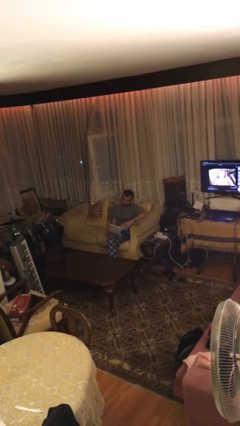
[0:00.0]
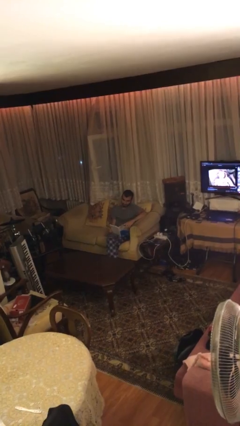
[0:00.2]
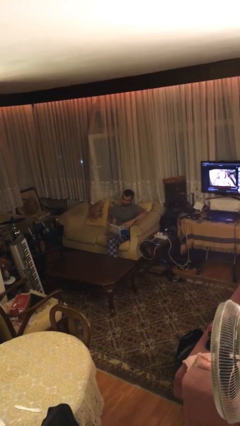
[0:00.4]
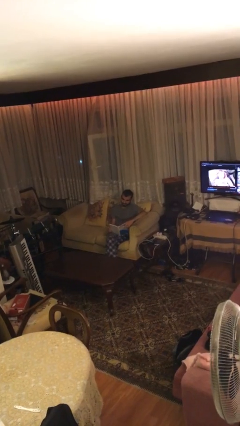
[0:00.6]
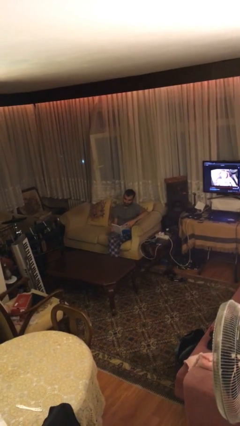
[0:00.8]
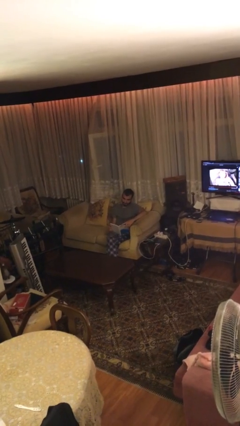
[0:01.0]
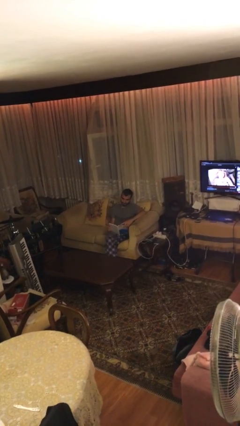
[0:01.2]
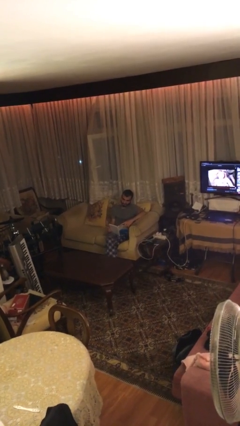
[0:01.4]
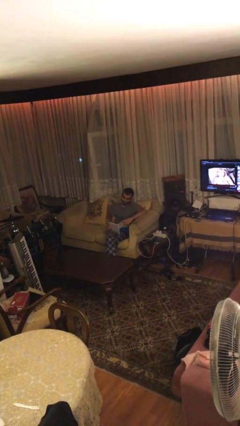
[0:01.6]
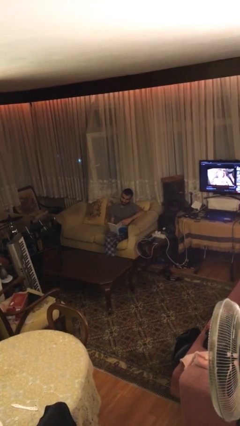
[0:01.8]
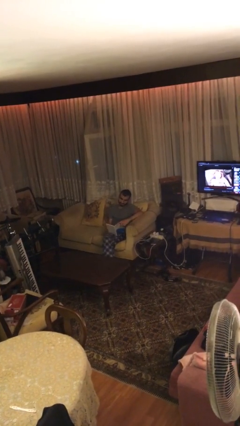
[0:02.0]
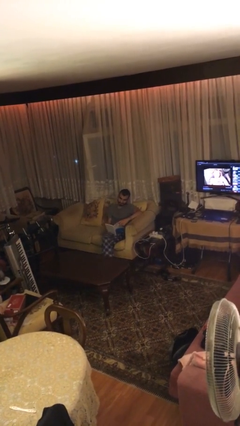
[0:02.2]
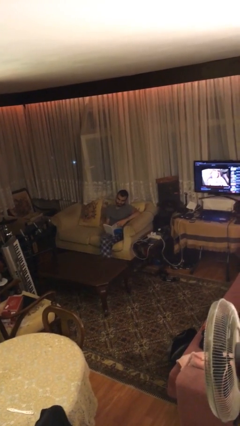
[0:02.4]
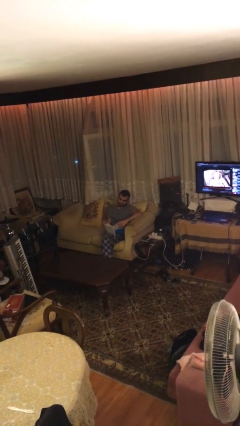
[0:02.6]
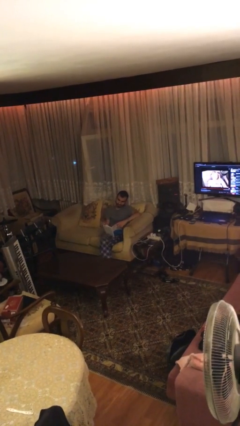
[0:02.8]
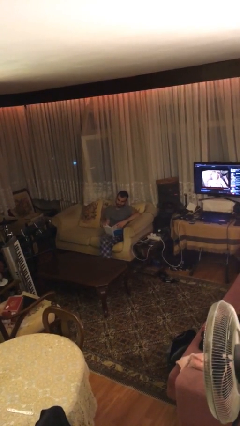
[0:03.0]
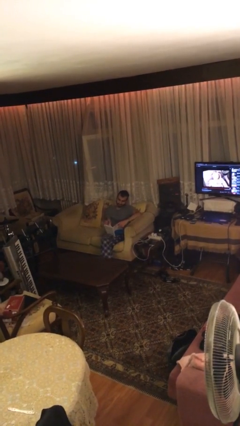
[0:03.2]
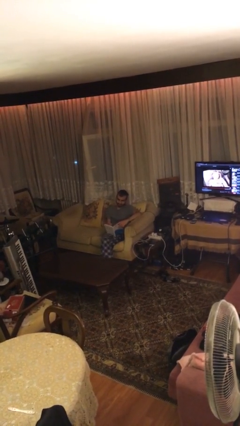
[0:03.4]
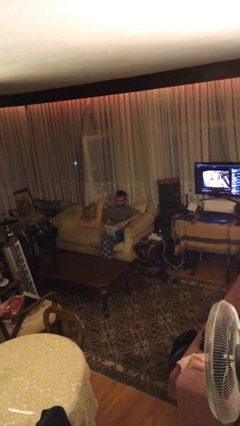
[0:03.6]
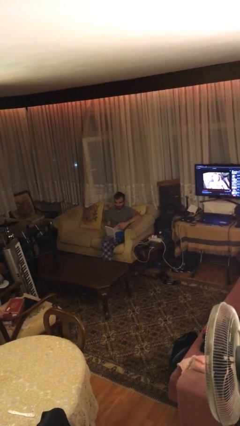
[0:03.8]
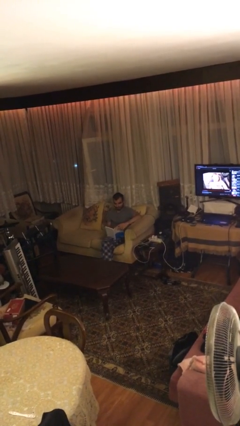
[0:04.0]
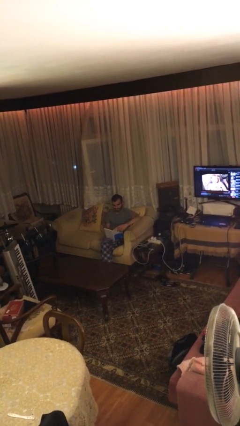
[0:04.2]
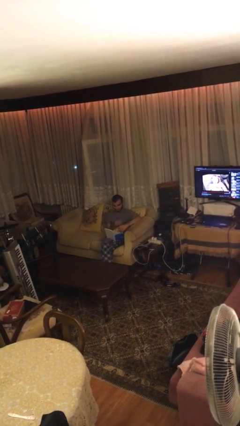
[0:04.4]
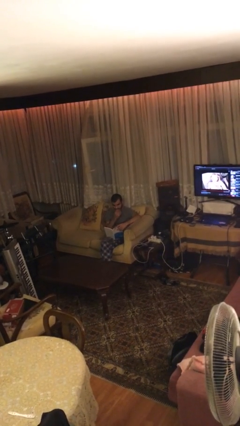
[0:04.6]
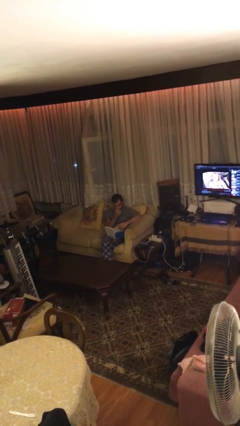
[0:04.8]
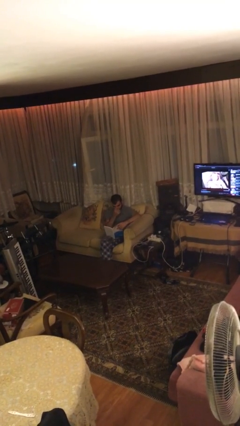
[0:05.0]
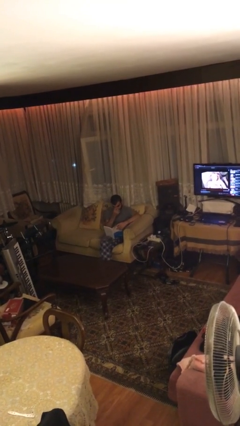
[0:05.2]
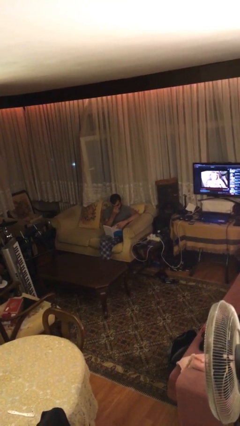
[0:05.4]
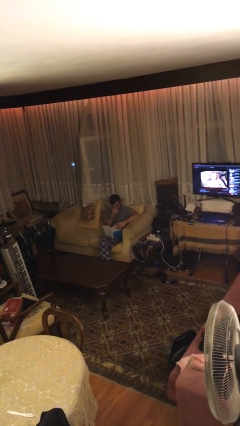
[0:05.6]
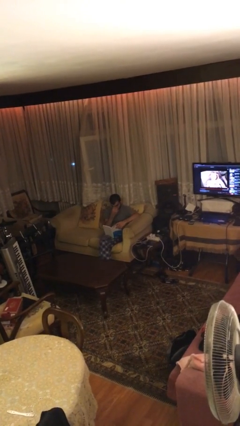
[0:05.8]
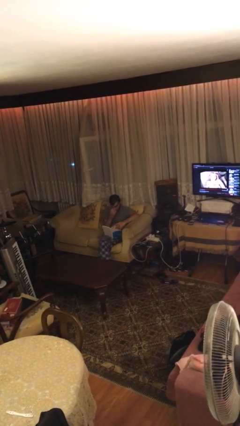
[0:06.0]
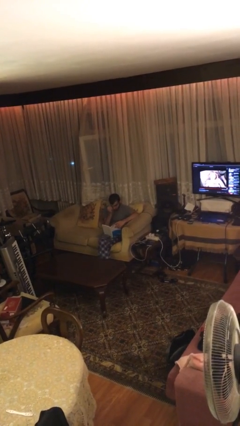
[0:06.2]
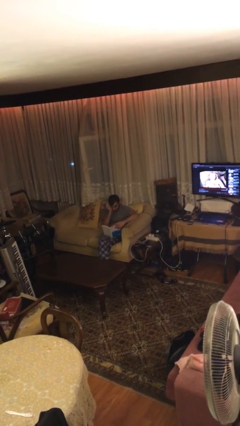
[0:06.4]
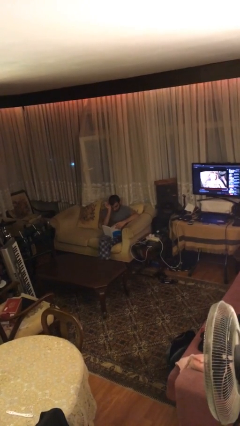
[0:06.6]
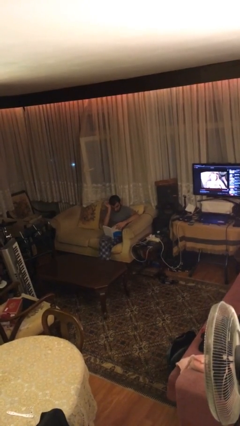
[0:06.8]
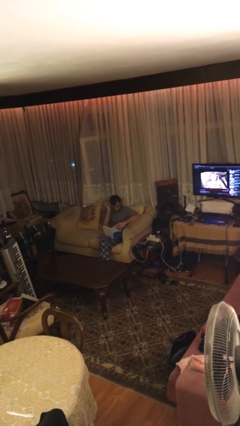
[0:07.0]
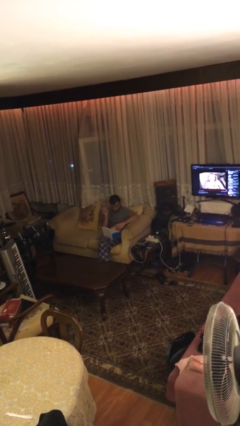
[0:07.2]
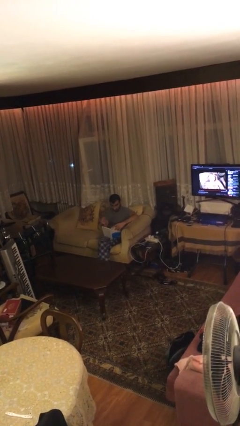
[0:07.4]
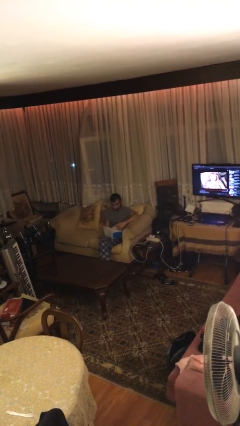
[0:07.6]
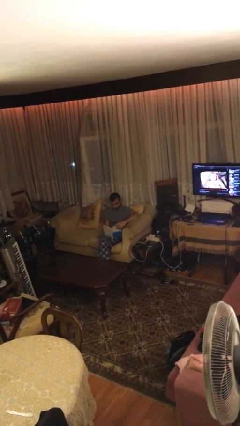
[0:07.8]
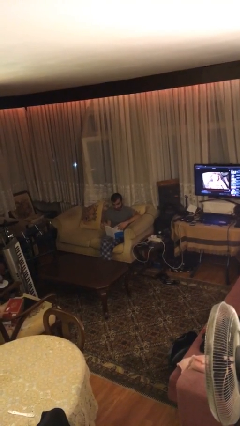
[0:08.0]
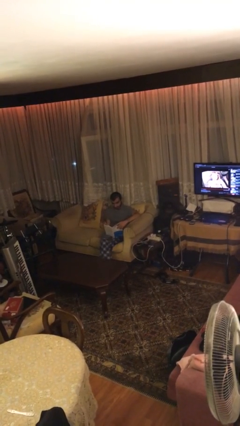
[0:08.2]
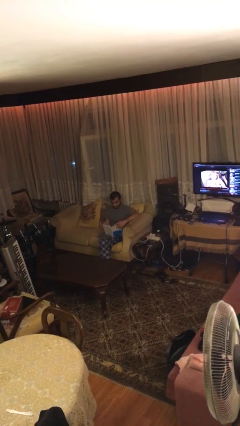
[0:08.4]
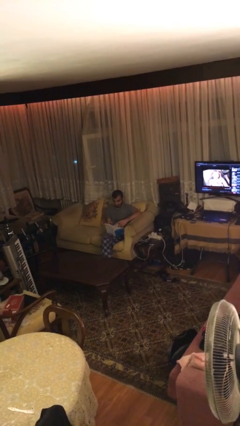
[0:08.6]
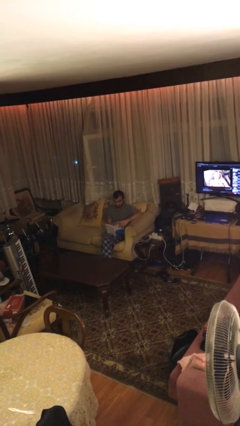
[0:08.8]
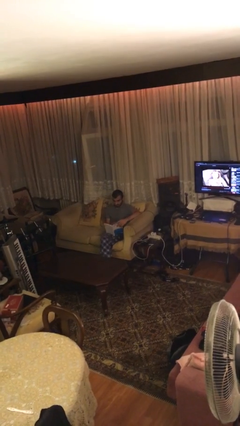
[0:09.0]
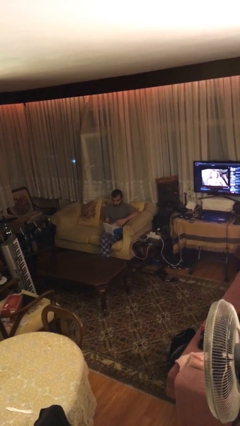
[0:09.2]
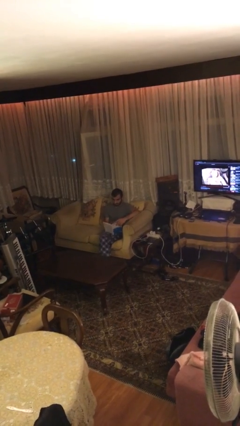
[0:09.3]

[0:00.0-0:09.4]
person reads document

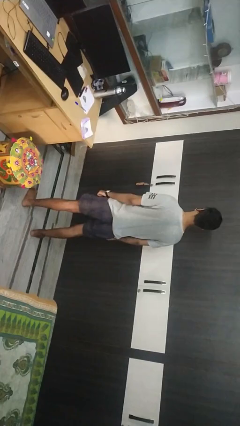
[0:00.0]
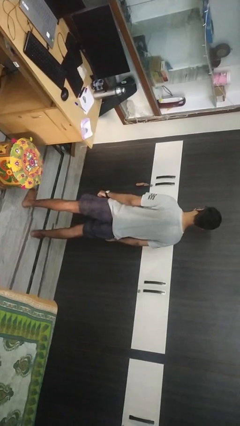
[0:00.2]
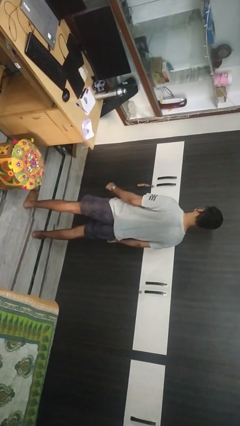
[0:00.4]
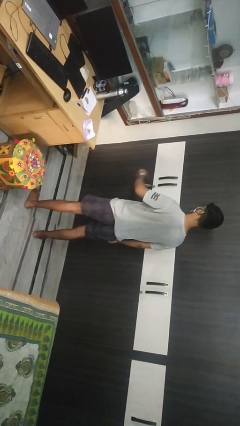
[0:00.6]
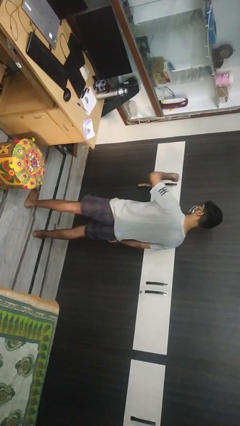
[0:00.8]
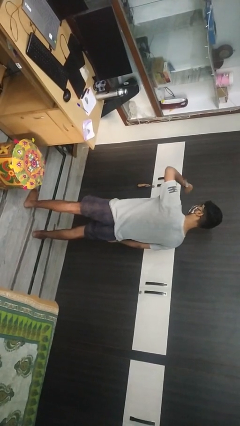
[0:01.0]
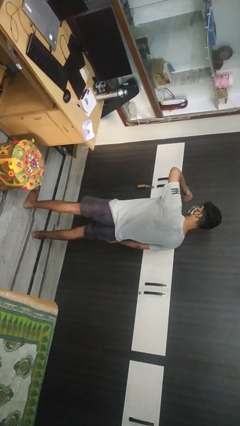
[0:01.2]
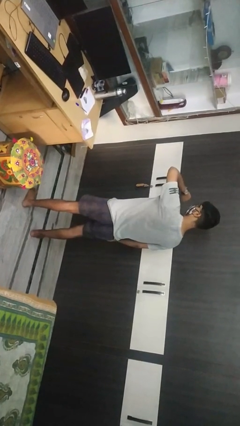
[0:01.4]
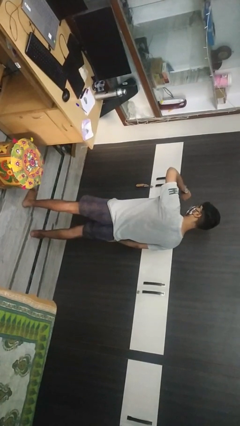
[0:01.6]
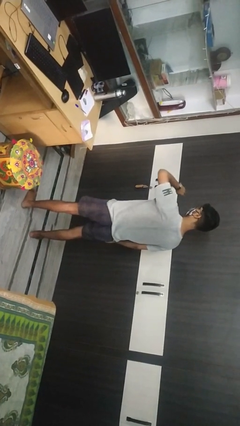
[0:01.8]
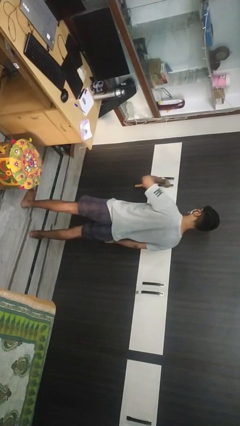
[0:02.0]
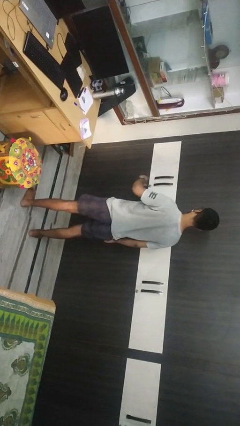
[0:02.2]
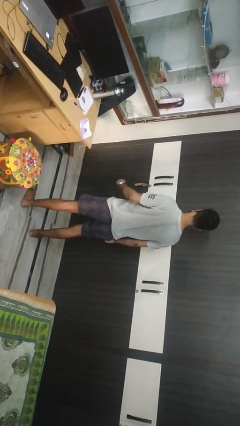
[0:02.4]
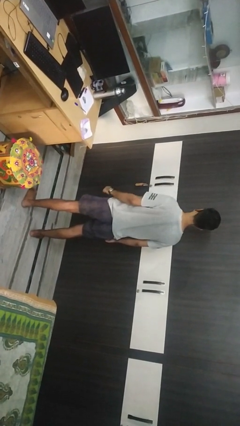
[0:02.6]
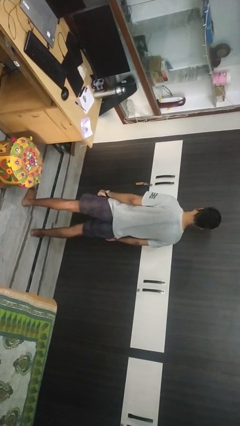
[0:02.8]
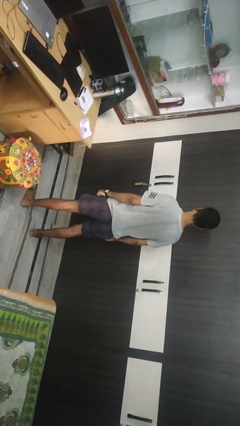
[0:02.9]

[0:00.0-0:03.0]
person looks at wristwatch

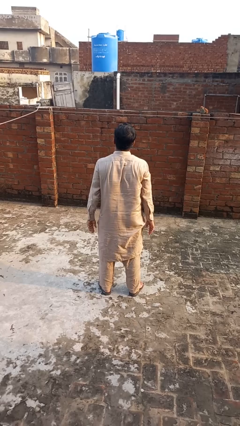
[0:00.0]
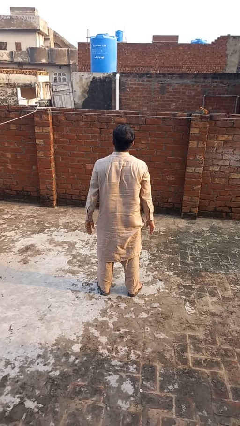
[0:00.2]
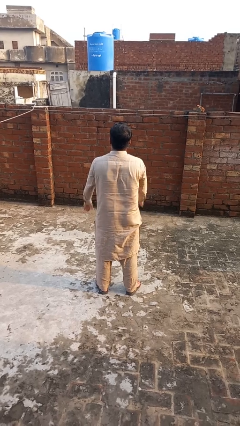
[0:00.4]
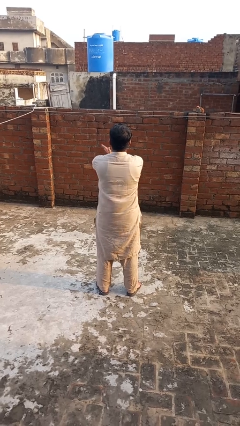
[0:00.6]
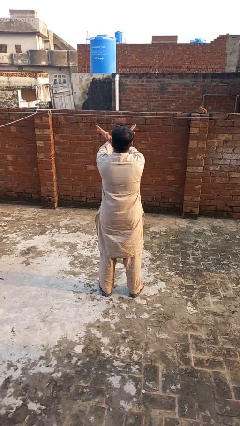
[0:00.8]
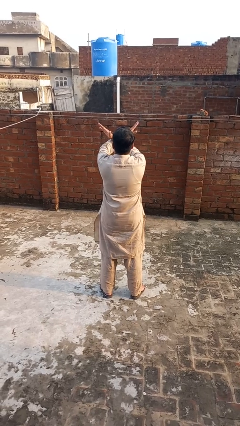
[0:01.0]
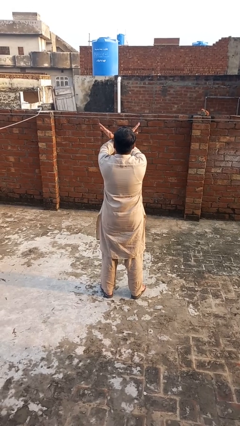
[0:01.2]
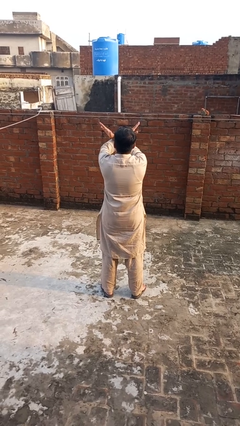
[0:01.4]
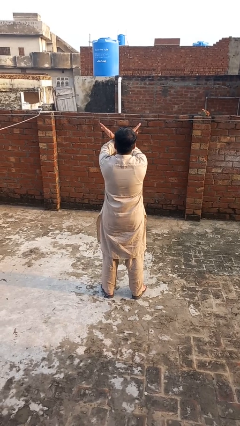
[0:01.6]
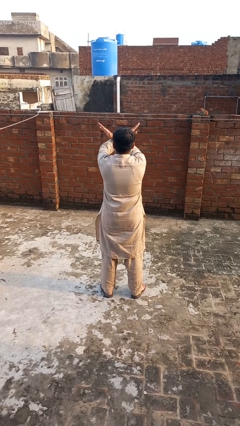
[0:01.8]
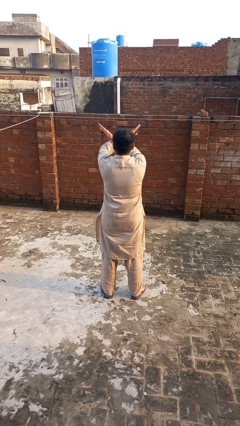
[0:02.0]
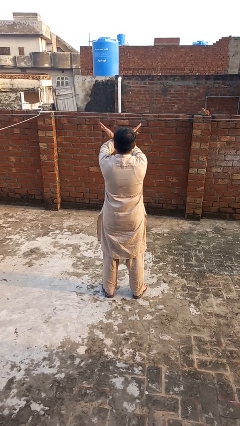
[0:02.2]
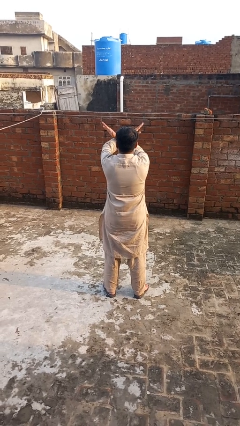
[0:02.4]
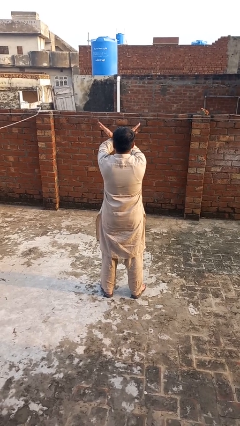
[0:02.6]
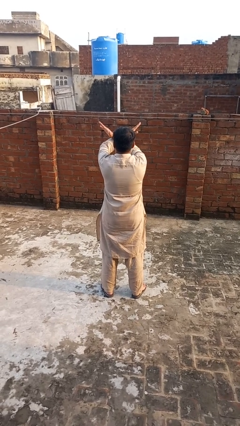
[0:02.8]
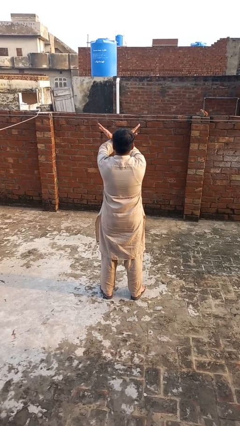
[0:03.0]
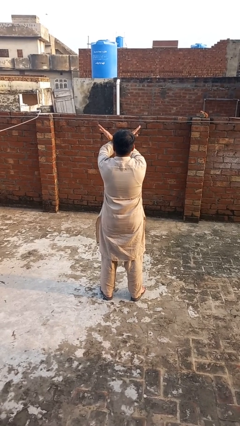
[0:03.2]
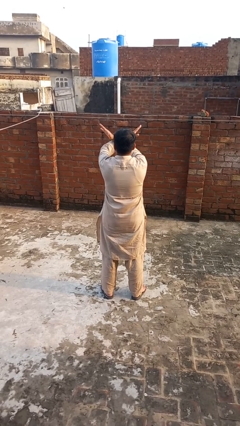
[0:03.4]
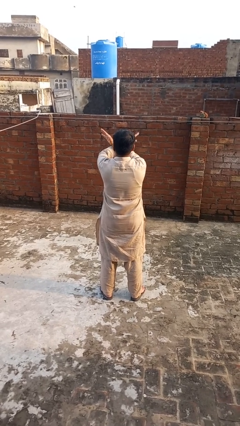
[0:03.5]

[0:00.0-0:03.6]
person gestures arms x

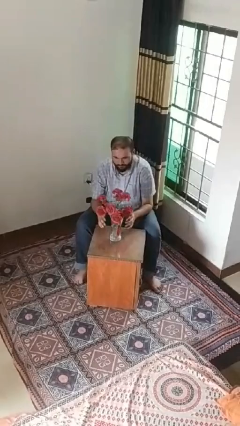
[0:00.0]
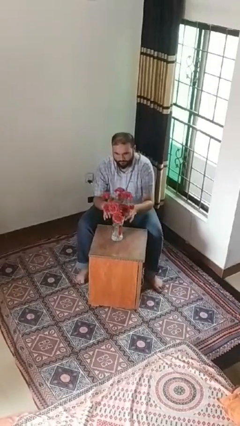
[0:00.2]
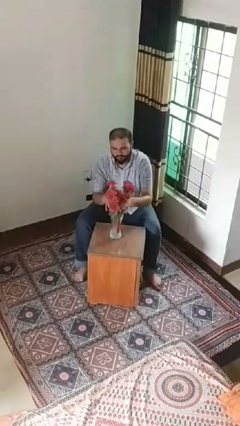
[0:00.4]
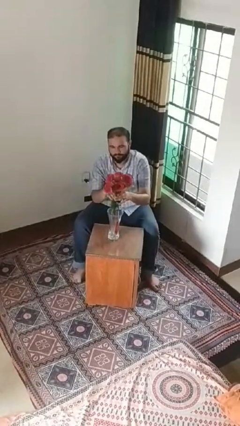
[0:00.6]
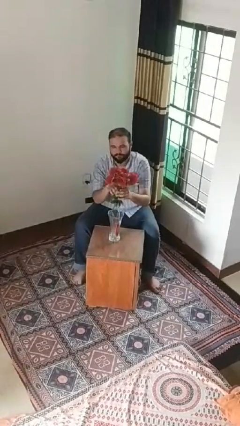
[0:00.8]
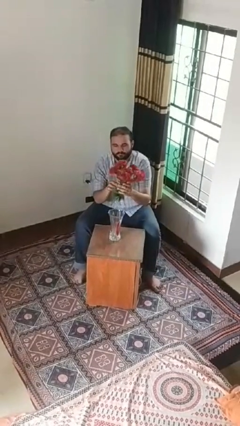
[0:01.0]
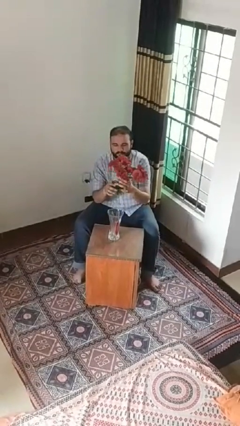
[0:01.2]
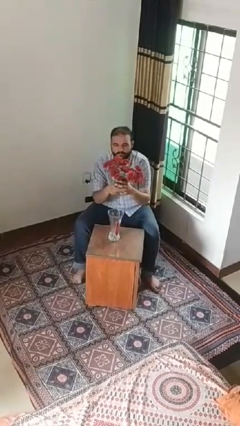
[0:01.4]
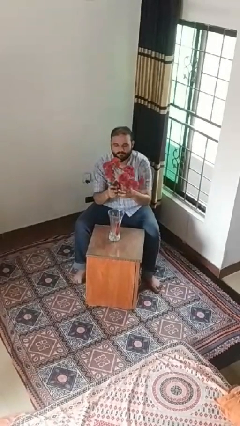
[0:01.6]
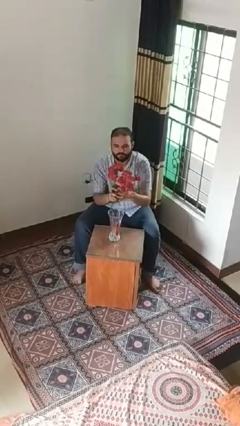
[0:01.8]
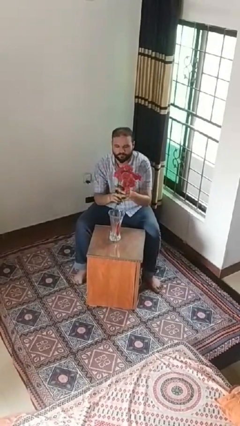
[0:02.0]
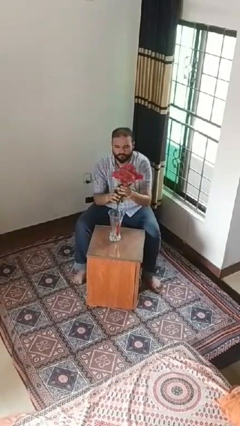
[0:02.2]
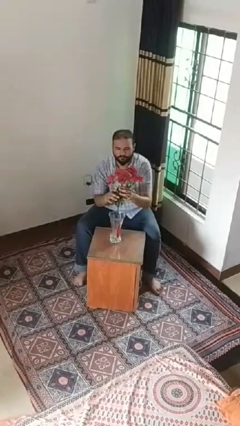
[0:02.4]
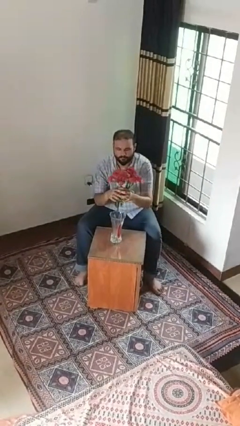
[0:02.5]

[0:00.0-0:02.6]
person arranges flowers in vase
